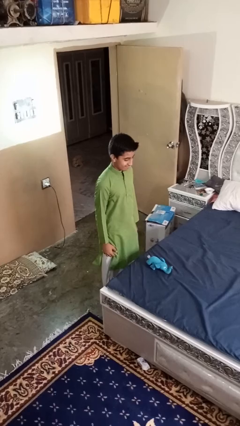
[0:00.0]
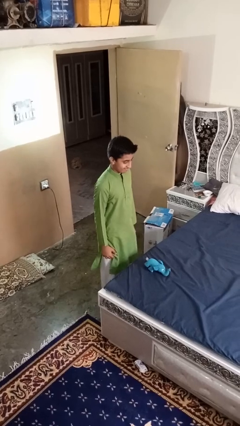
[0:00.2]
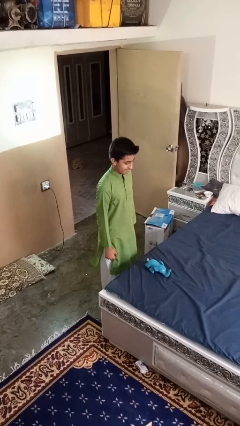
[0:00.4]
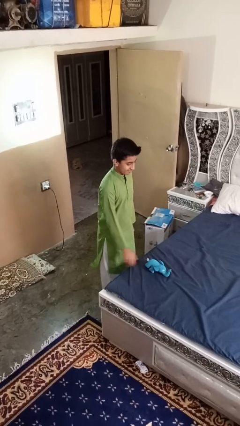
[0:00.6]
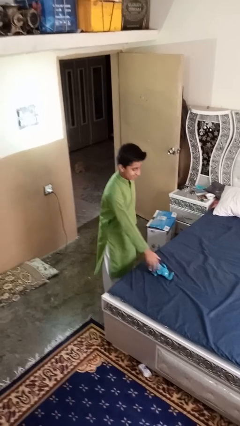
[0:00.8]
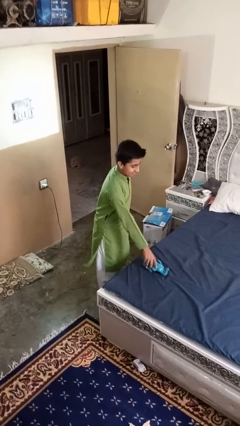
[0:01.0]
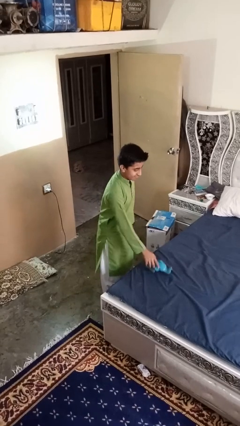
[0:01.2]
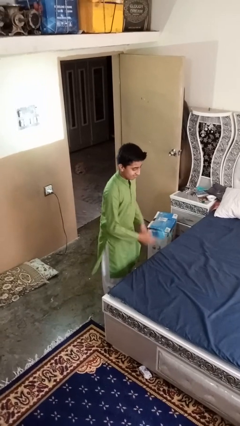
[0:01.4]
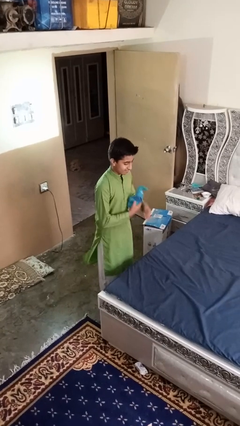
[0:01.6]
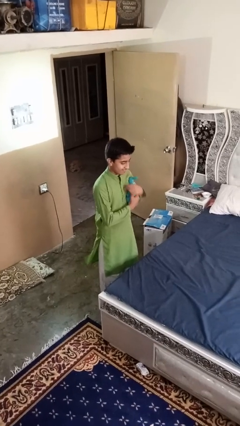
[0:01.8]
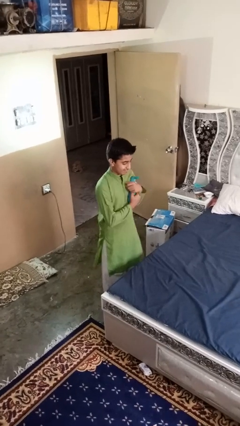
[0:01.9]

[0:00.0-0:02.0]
person hugs stuffed animal

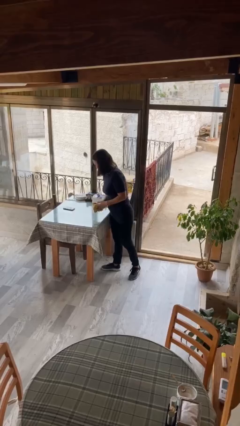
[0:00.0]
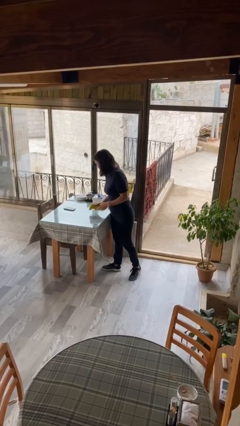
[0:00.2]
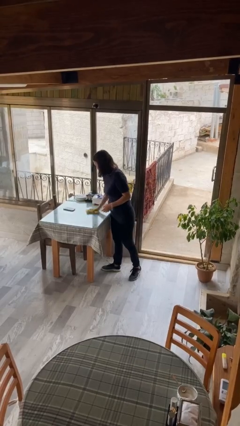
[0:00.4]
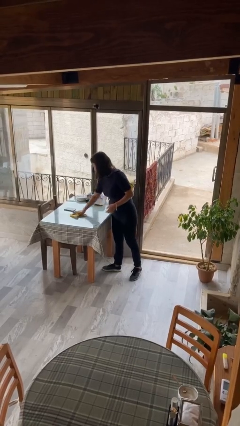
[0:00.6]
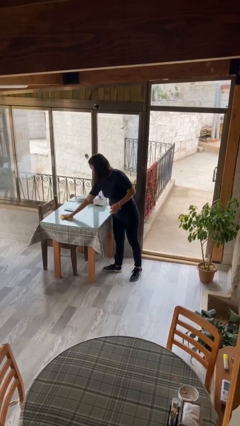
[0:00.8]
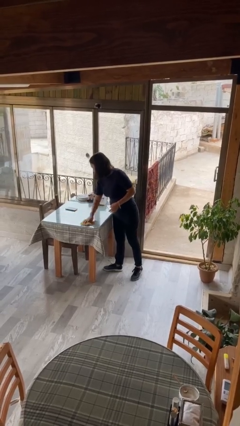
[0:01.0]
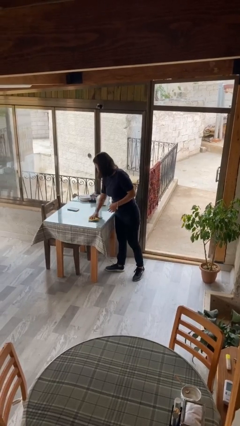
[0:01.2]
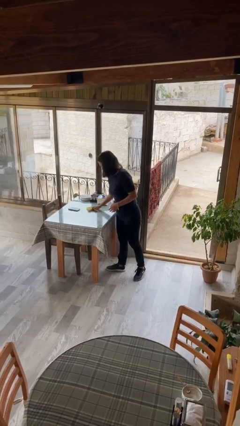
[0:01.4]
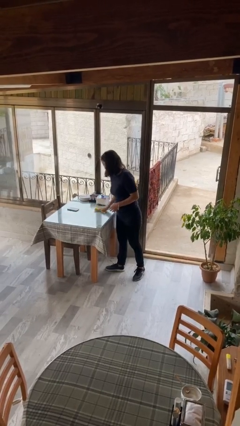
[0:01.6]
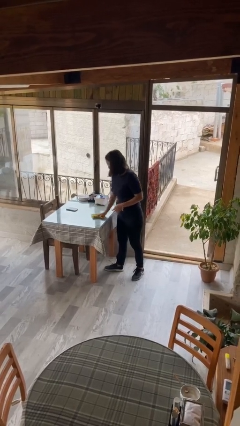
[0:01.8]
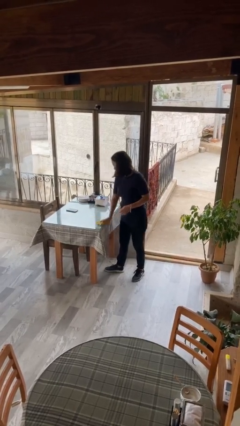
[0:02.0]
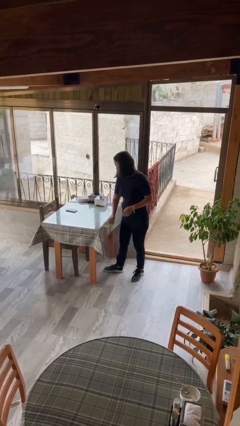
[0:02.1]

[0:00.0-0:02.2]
person cleans table with rag

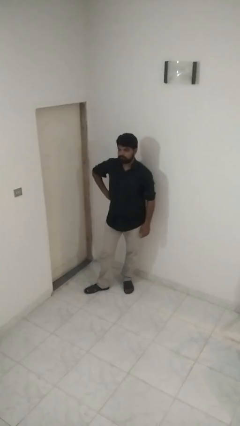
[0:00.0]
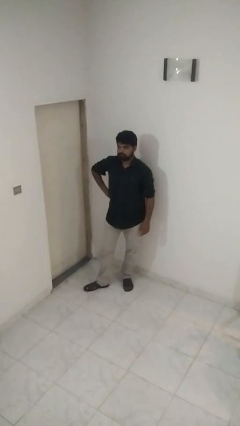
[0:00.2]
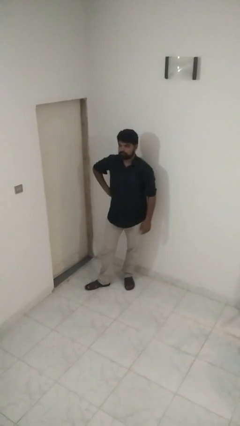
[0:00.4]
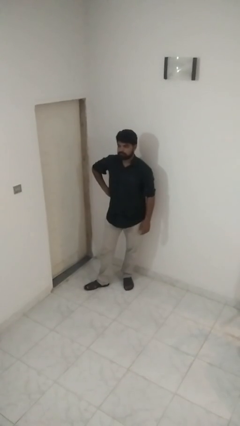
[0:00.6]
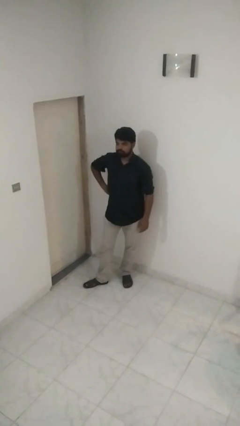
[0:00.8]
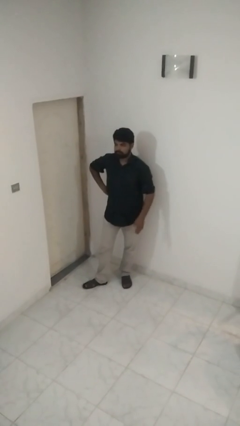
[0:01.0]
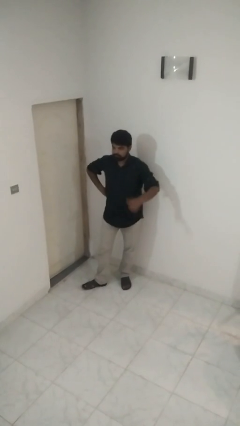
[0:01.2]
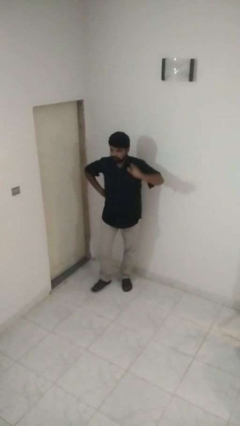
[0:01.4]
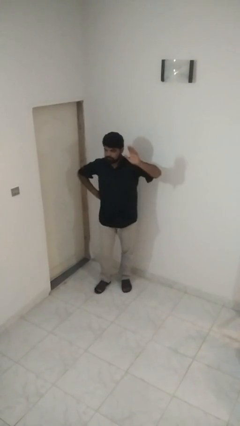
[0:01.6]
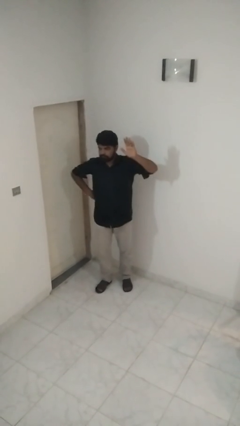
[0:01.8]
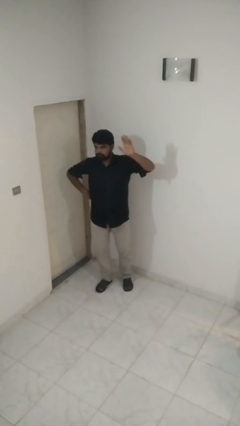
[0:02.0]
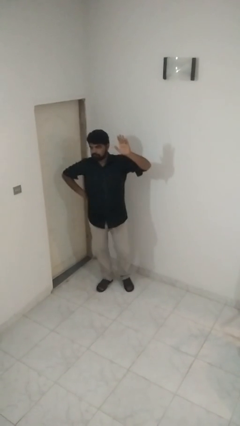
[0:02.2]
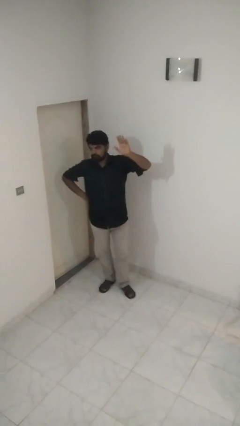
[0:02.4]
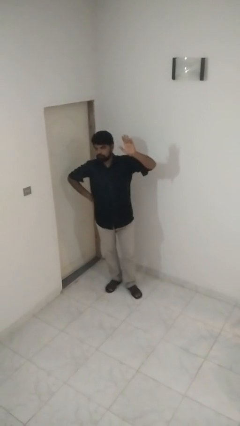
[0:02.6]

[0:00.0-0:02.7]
person gestures raise hand

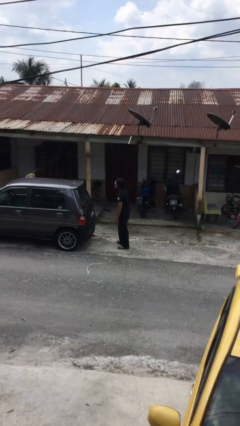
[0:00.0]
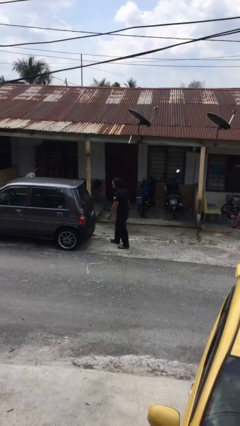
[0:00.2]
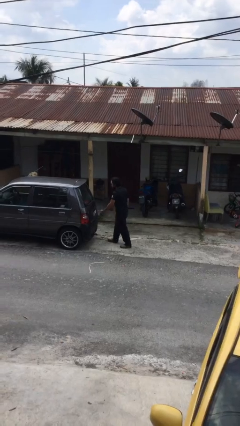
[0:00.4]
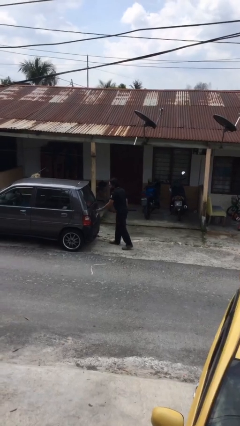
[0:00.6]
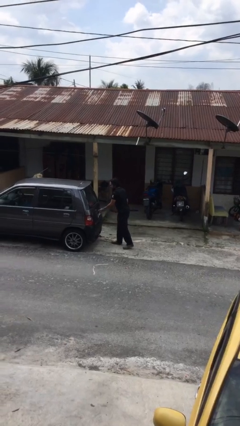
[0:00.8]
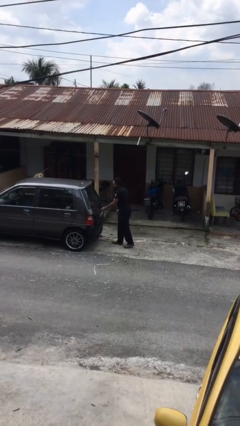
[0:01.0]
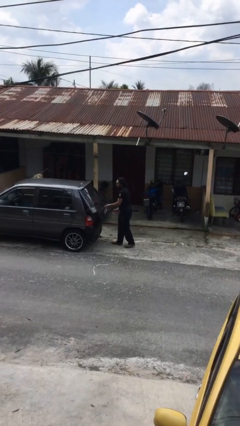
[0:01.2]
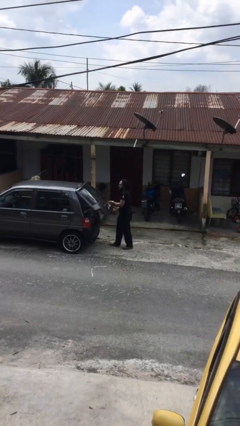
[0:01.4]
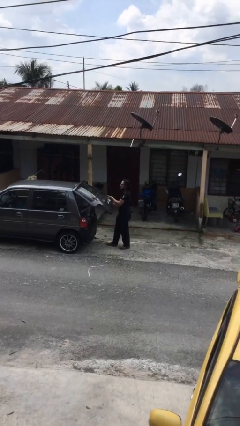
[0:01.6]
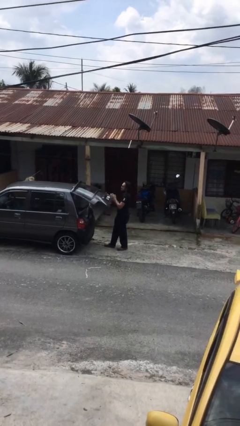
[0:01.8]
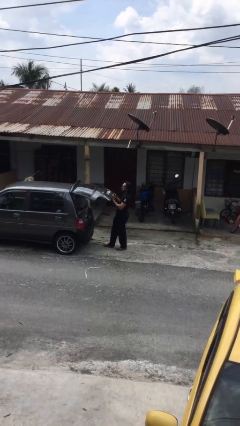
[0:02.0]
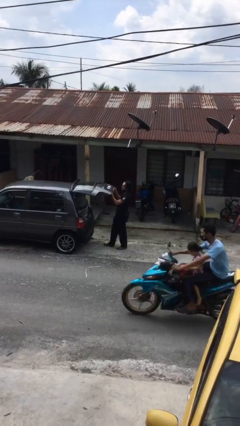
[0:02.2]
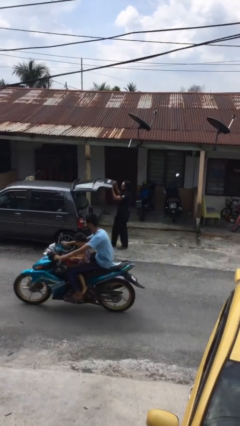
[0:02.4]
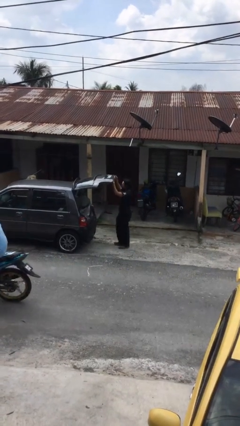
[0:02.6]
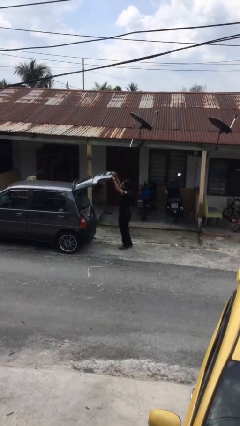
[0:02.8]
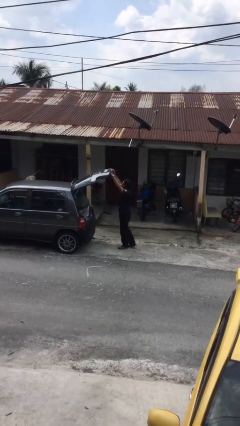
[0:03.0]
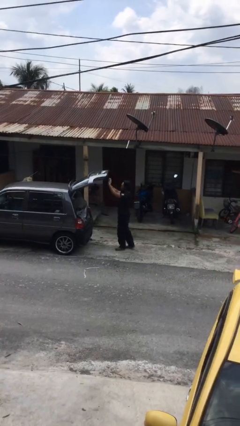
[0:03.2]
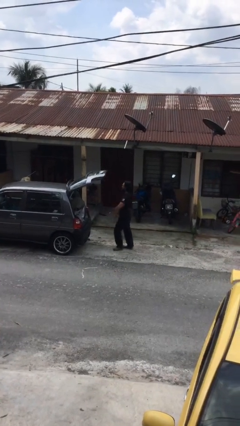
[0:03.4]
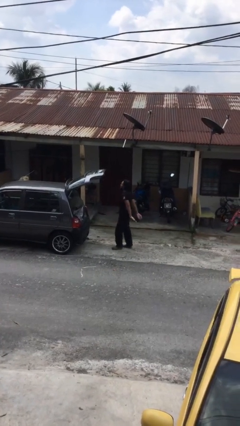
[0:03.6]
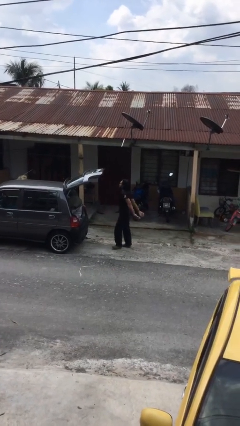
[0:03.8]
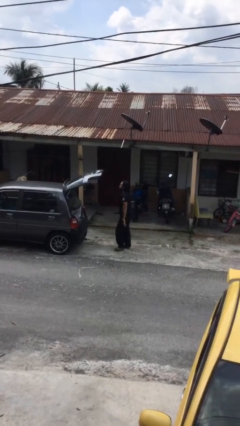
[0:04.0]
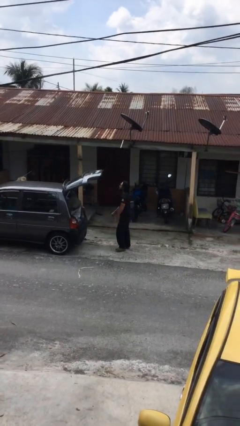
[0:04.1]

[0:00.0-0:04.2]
person opens car trunk

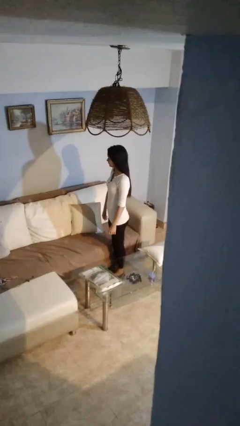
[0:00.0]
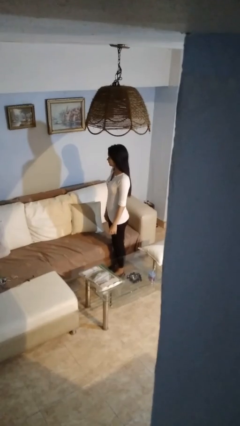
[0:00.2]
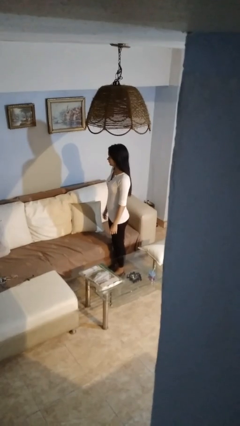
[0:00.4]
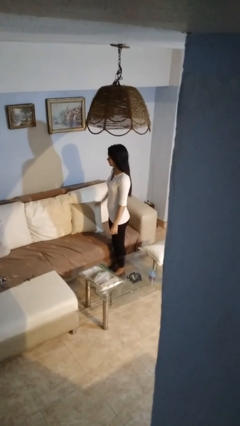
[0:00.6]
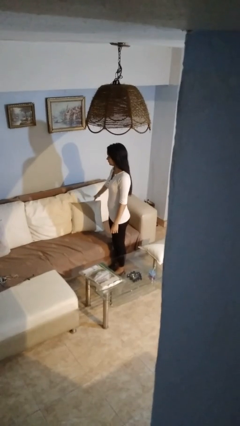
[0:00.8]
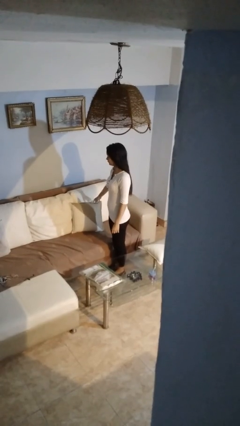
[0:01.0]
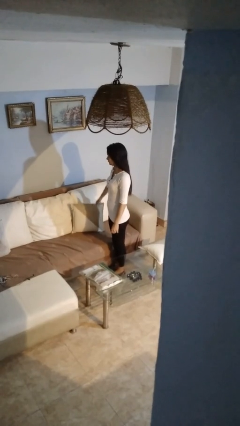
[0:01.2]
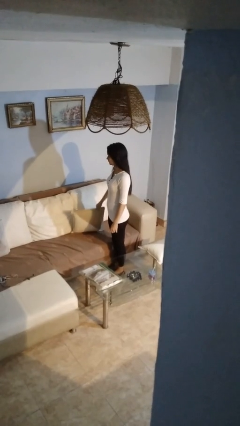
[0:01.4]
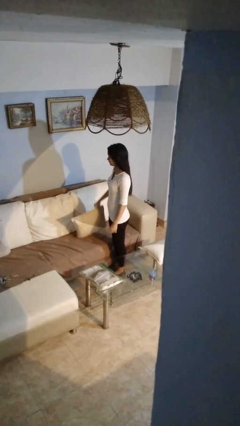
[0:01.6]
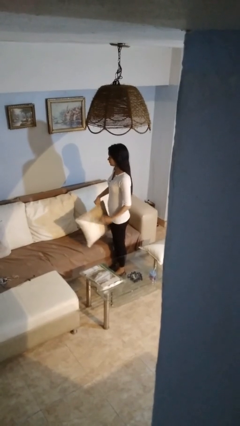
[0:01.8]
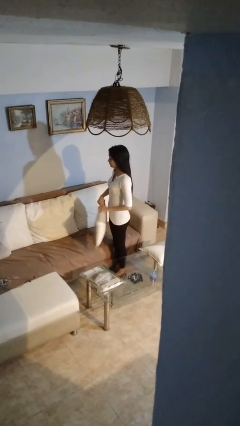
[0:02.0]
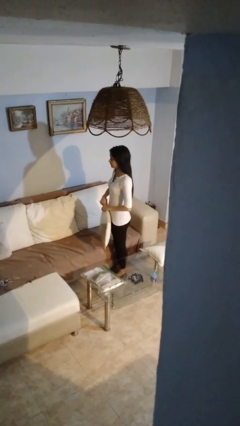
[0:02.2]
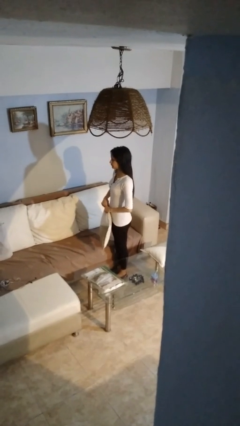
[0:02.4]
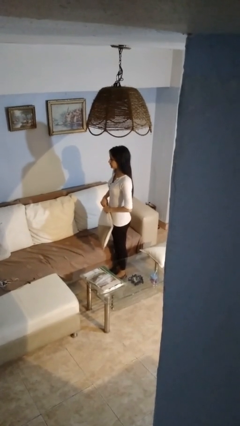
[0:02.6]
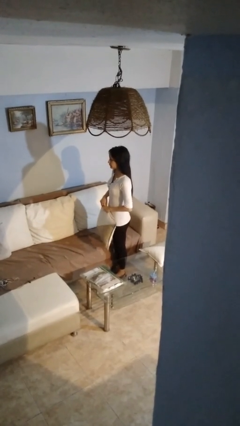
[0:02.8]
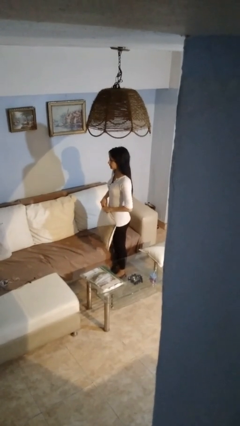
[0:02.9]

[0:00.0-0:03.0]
person puts down object on couch

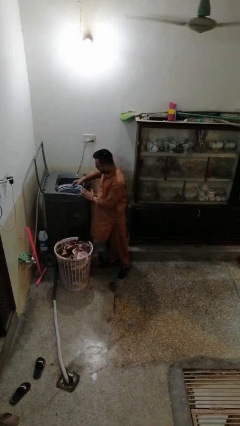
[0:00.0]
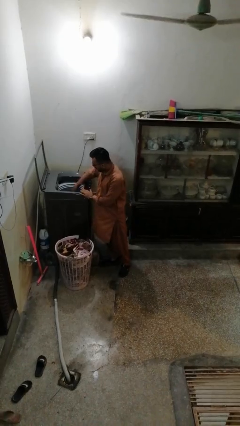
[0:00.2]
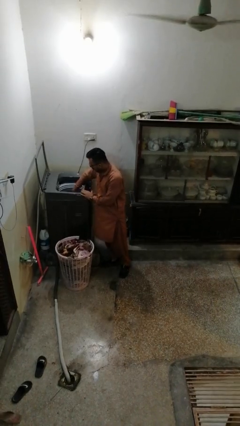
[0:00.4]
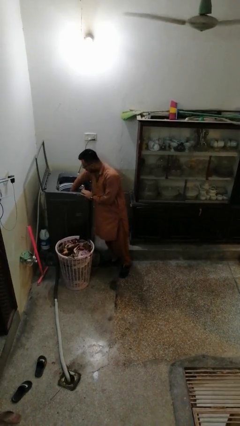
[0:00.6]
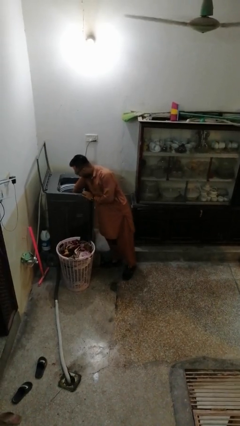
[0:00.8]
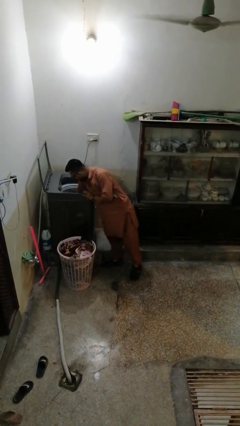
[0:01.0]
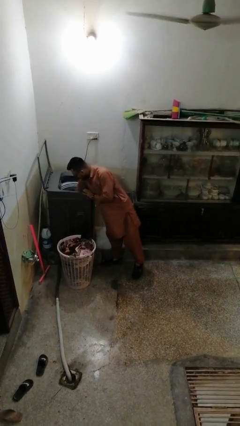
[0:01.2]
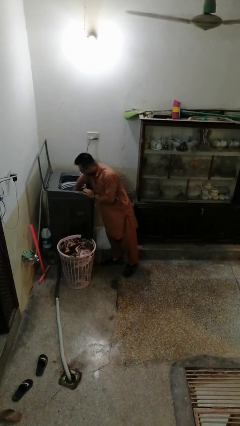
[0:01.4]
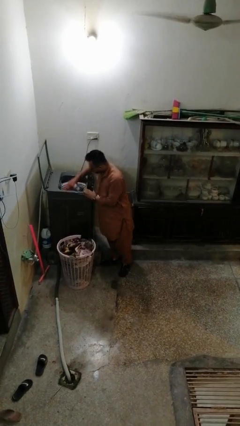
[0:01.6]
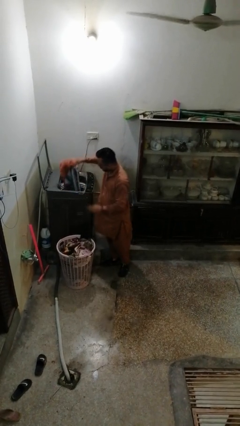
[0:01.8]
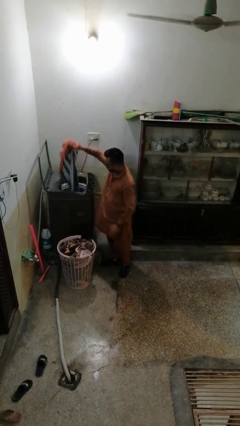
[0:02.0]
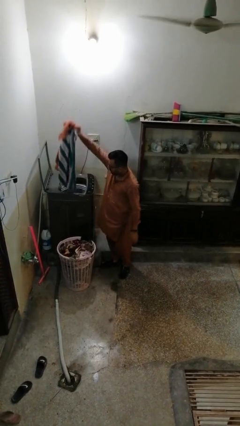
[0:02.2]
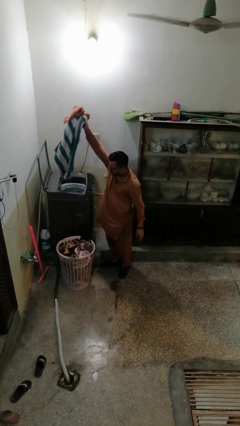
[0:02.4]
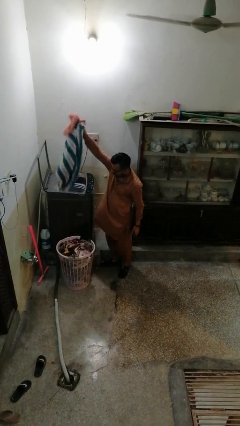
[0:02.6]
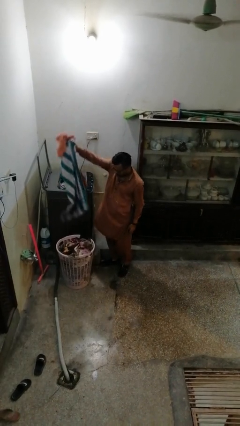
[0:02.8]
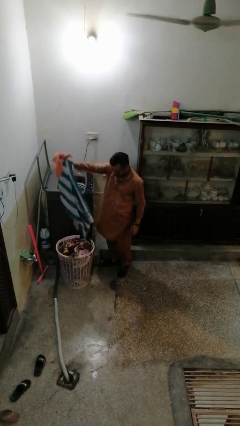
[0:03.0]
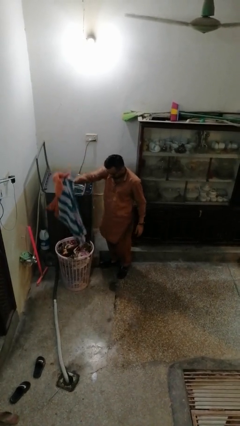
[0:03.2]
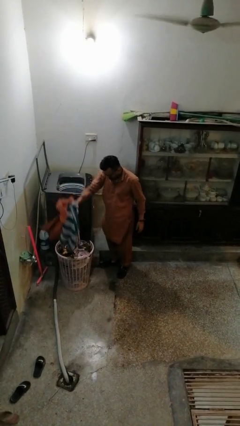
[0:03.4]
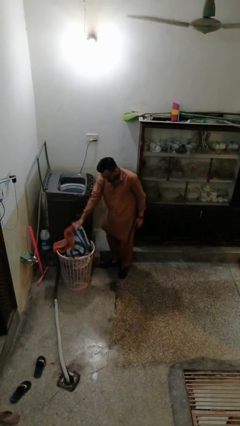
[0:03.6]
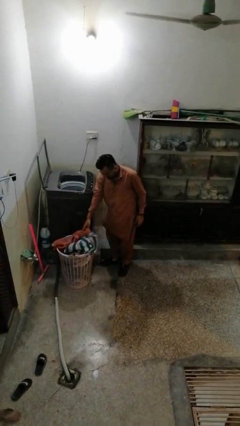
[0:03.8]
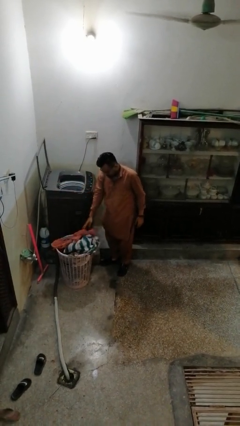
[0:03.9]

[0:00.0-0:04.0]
person unloads clotheswasher
